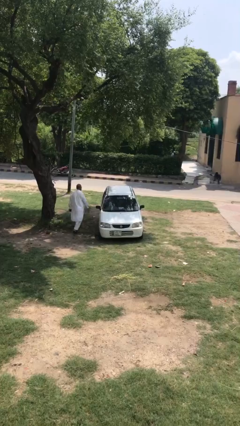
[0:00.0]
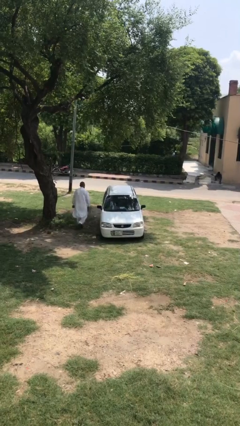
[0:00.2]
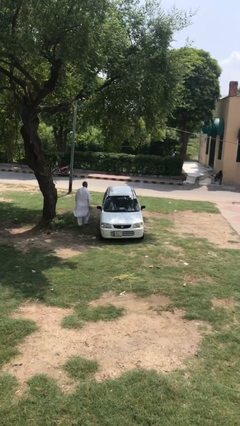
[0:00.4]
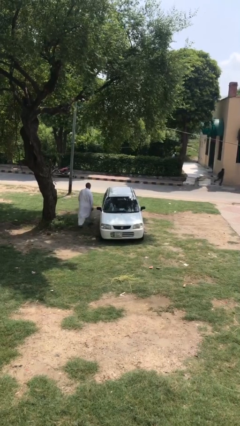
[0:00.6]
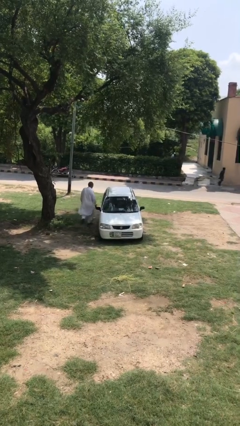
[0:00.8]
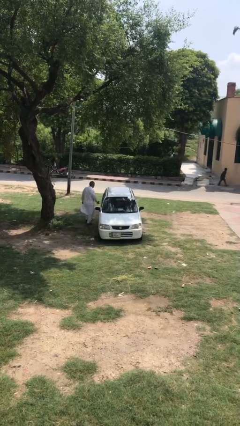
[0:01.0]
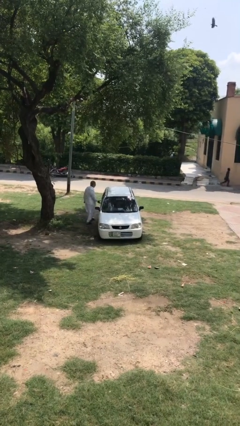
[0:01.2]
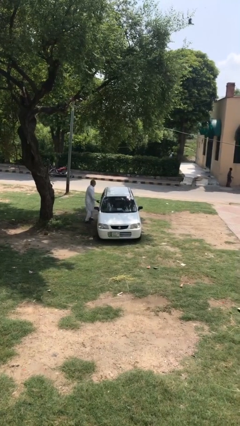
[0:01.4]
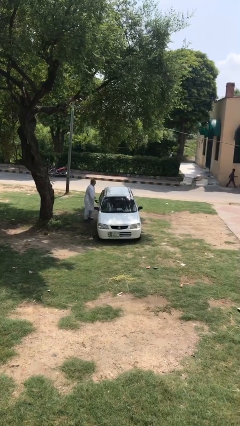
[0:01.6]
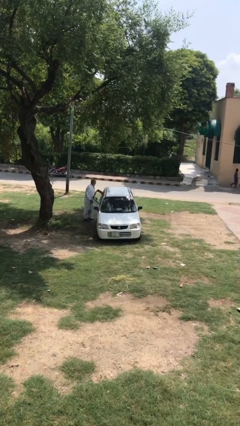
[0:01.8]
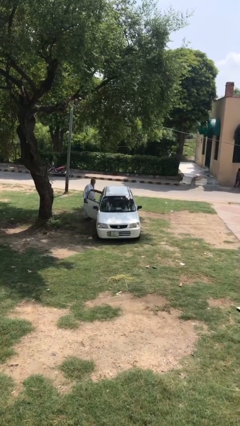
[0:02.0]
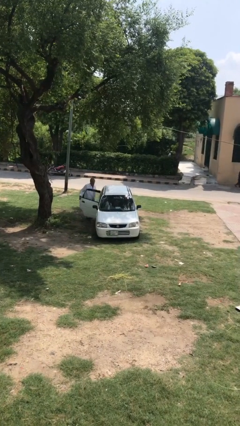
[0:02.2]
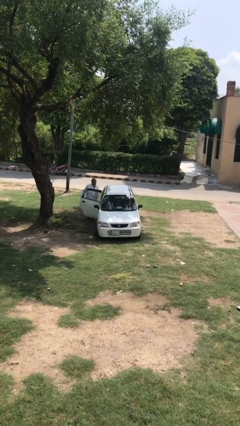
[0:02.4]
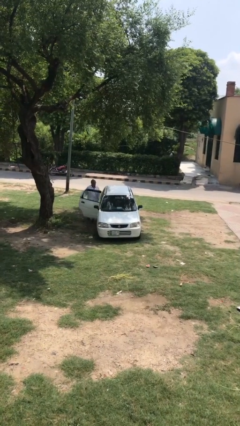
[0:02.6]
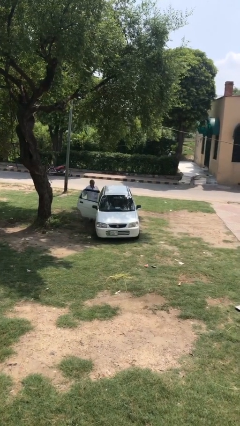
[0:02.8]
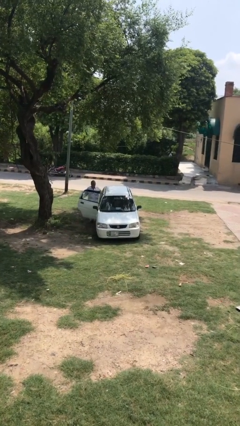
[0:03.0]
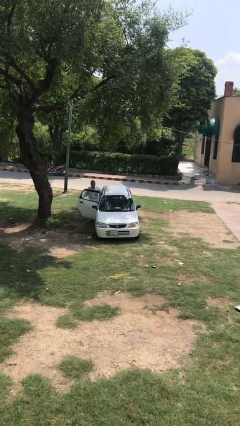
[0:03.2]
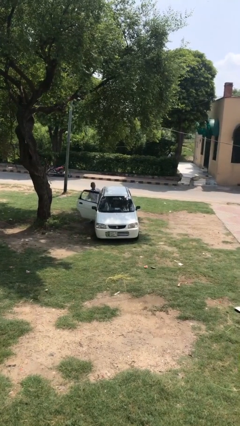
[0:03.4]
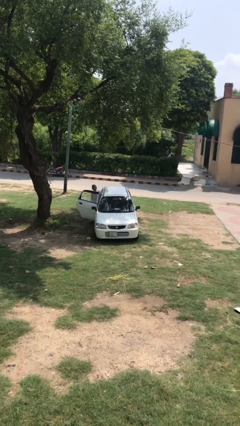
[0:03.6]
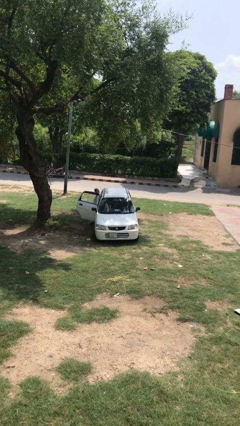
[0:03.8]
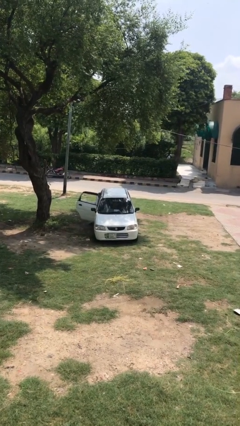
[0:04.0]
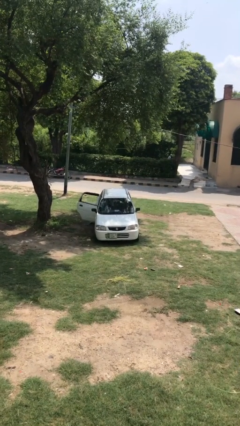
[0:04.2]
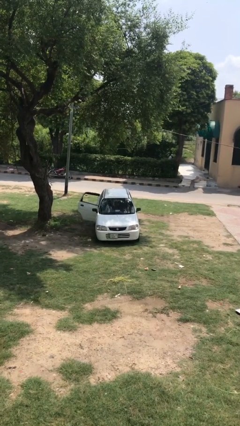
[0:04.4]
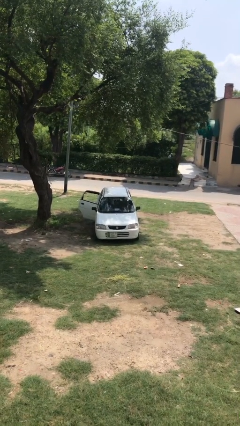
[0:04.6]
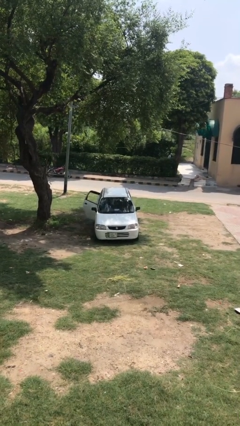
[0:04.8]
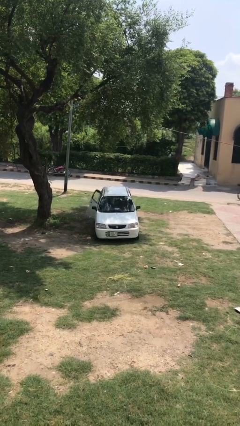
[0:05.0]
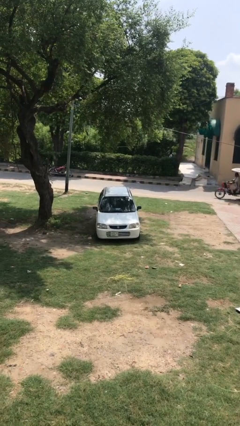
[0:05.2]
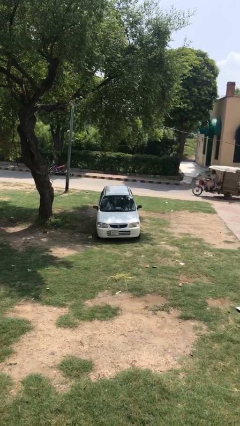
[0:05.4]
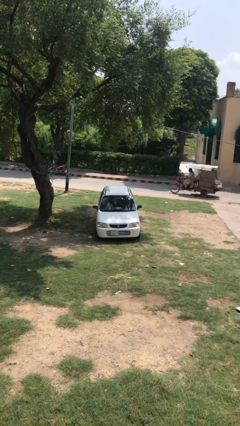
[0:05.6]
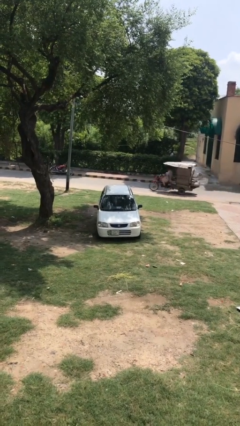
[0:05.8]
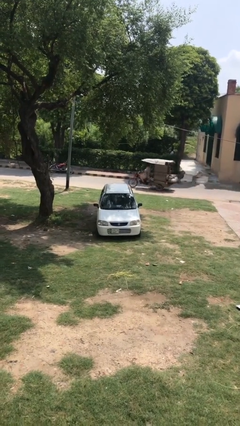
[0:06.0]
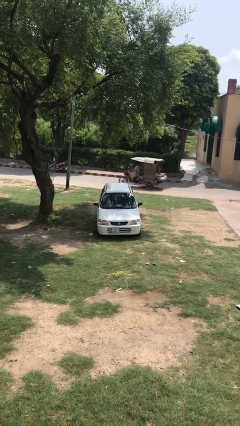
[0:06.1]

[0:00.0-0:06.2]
car picks up person

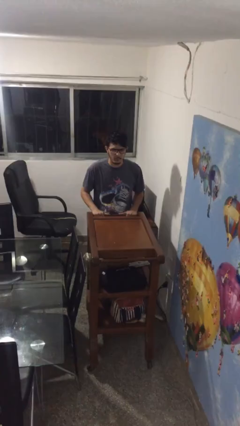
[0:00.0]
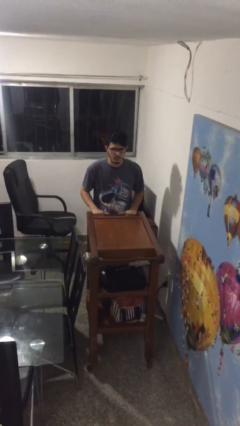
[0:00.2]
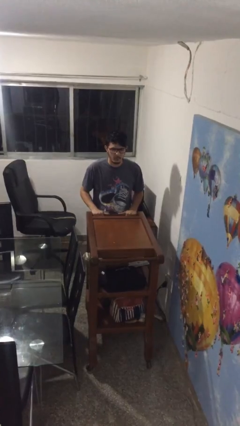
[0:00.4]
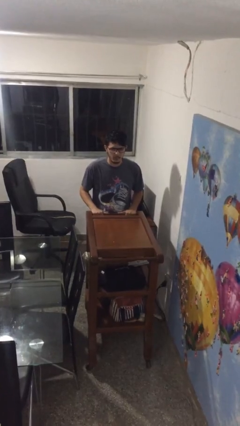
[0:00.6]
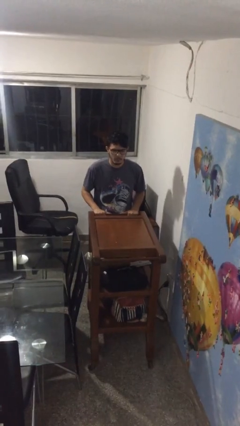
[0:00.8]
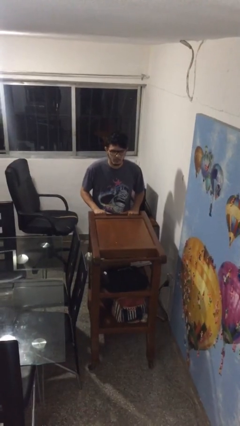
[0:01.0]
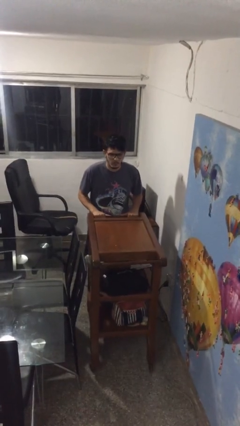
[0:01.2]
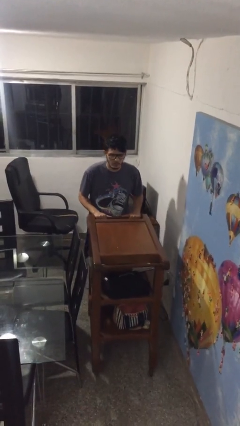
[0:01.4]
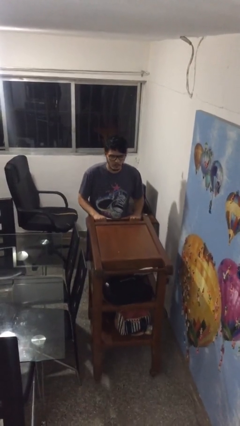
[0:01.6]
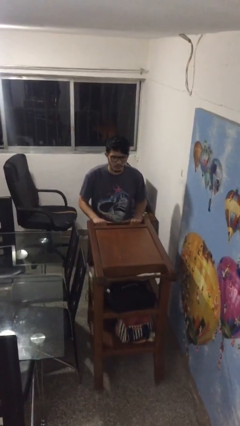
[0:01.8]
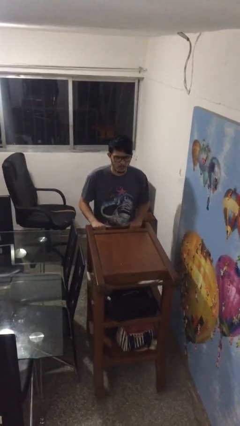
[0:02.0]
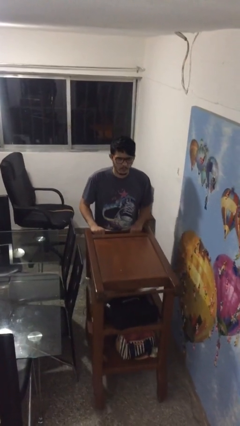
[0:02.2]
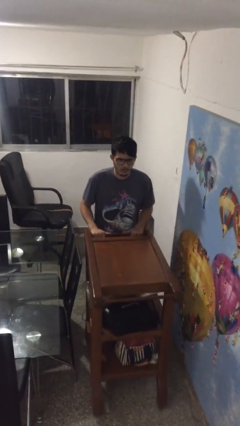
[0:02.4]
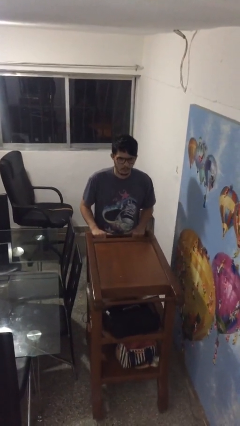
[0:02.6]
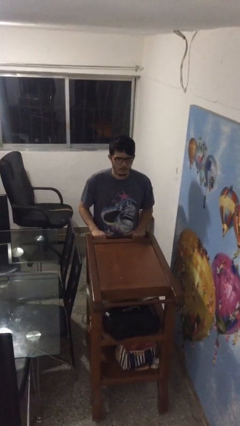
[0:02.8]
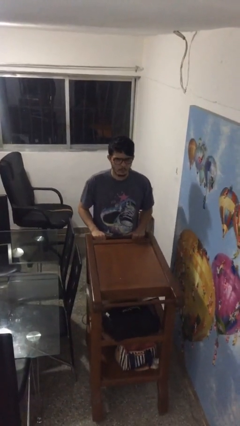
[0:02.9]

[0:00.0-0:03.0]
person pushes wheeled cart

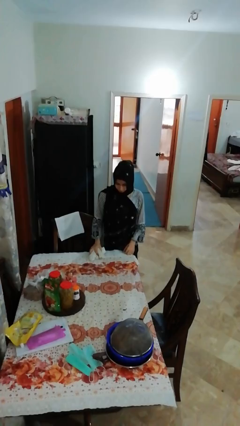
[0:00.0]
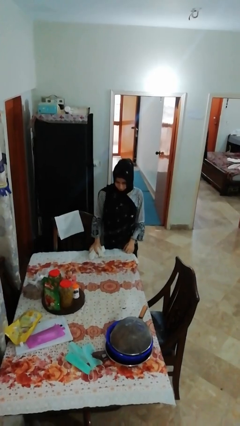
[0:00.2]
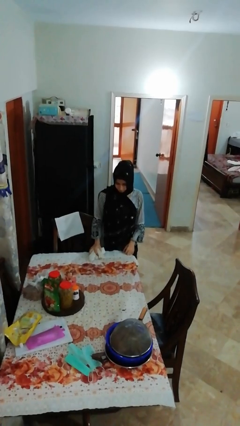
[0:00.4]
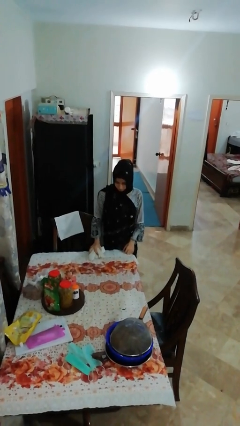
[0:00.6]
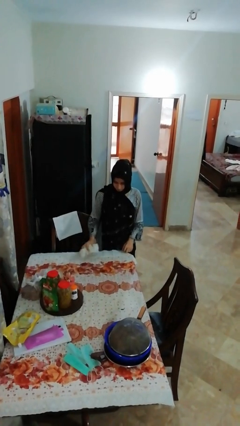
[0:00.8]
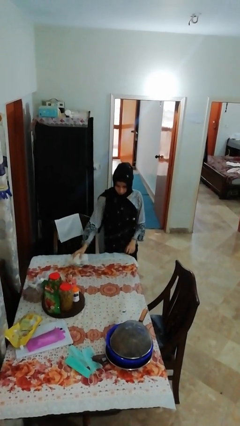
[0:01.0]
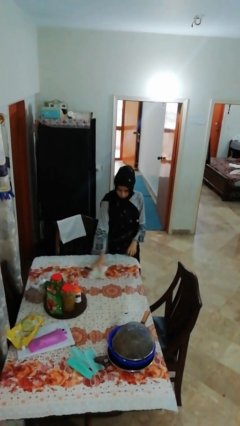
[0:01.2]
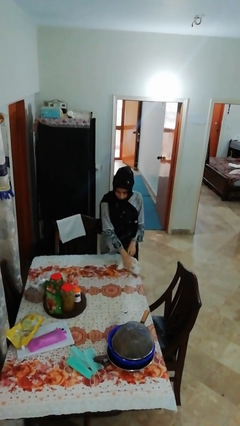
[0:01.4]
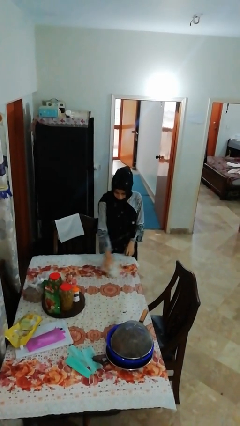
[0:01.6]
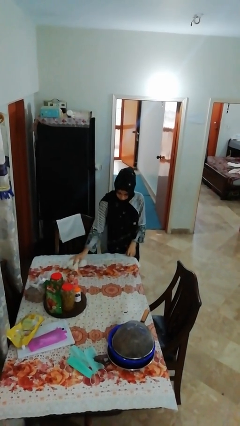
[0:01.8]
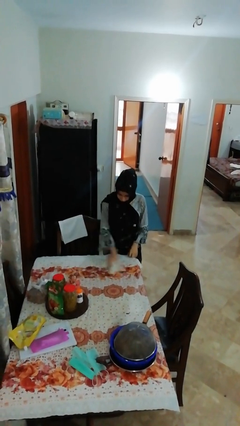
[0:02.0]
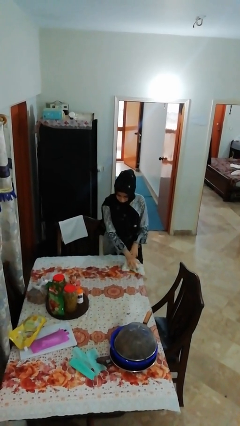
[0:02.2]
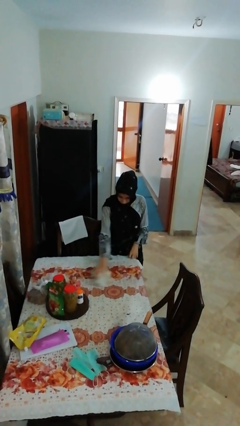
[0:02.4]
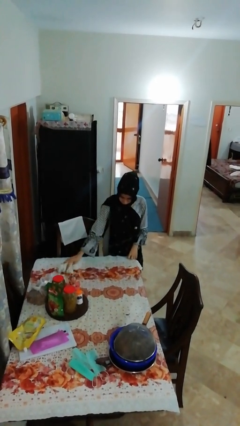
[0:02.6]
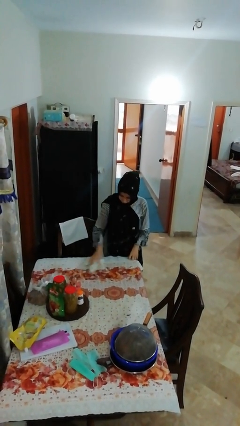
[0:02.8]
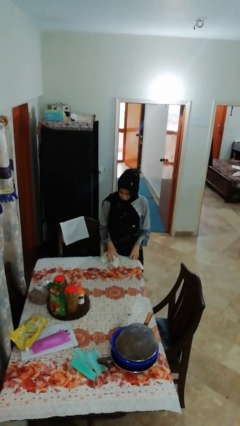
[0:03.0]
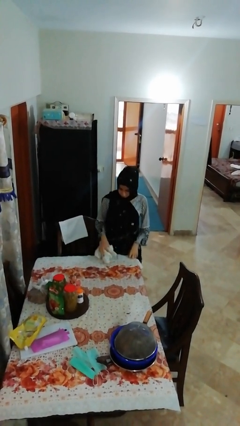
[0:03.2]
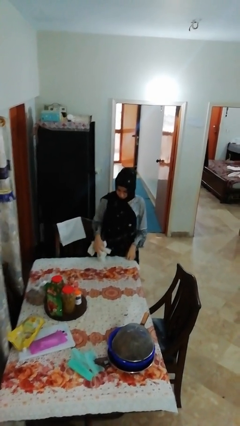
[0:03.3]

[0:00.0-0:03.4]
person cleans table with rag

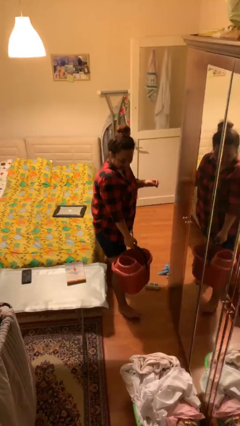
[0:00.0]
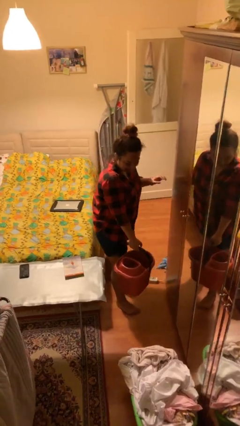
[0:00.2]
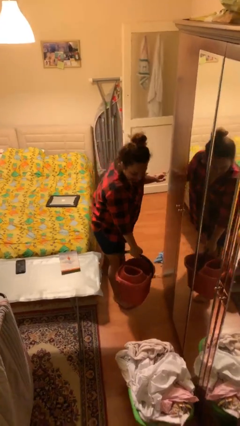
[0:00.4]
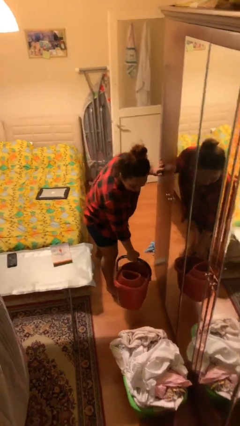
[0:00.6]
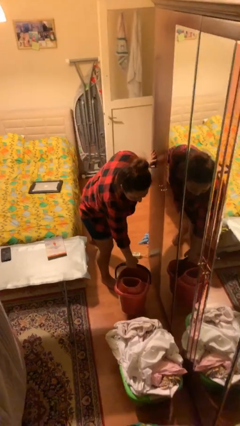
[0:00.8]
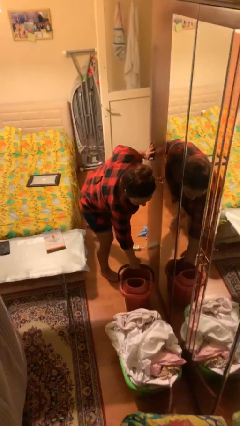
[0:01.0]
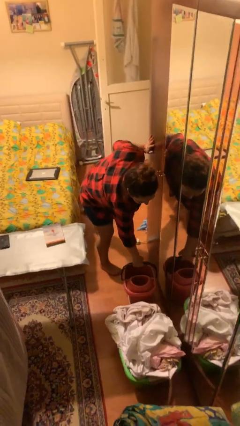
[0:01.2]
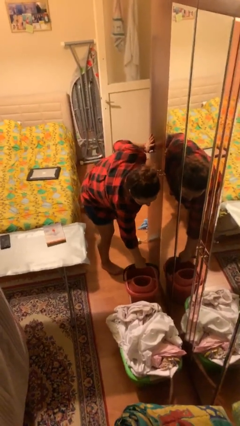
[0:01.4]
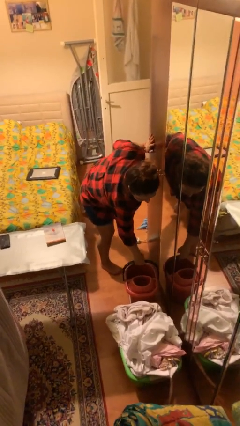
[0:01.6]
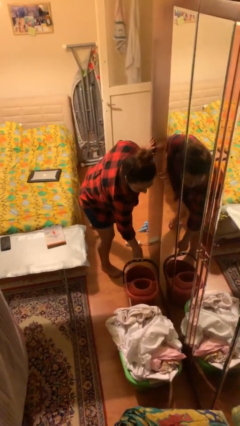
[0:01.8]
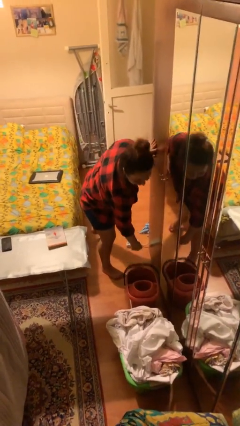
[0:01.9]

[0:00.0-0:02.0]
person puts down object on floor

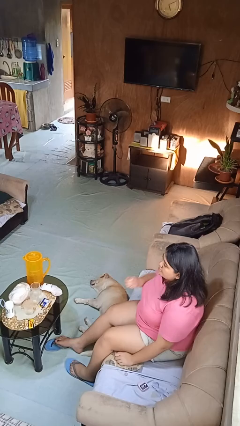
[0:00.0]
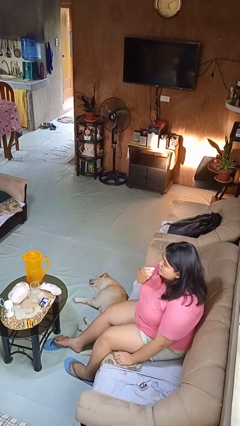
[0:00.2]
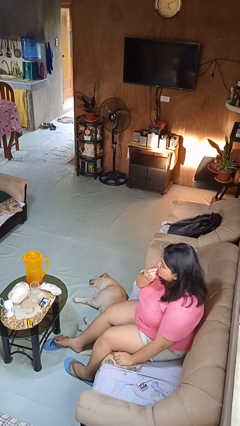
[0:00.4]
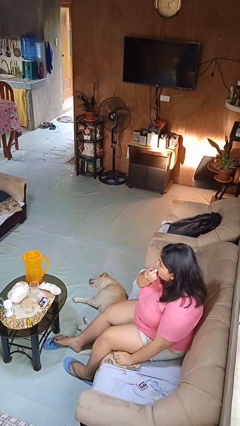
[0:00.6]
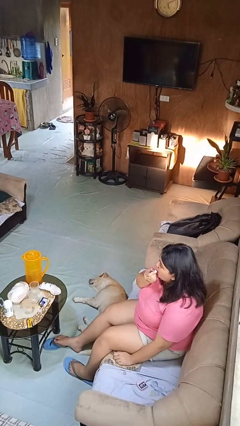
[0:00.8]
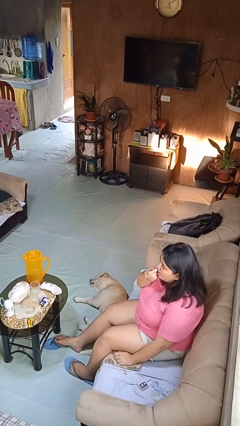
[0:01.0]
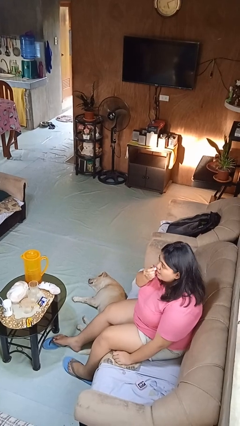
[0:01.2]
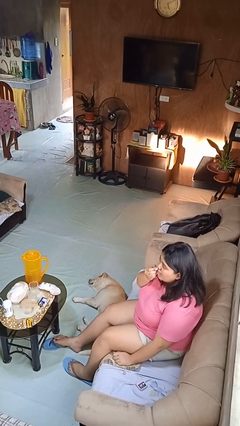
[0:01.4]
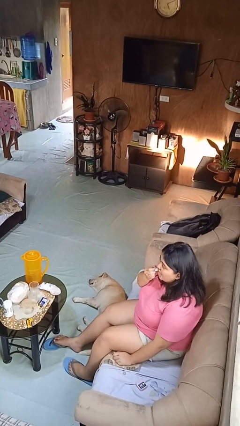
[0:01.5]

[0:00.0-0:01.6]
person applies lip makeup

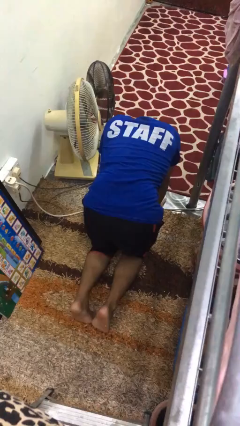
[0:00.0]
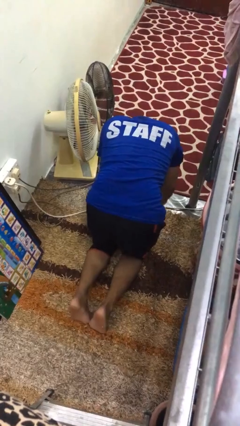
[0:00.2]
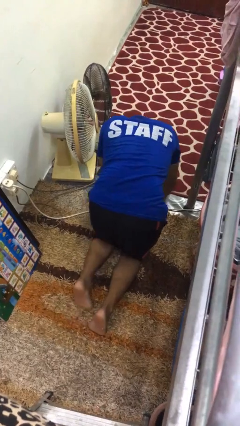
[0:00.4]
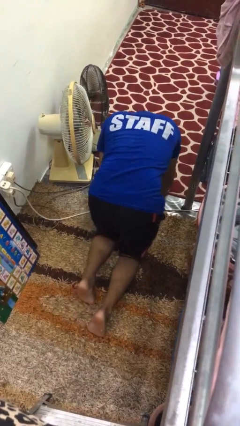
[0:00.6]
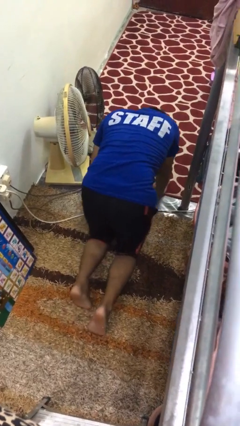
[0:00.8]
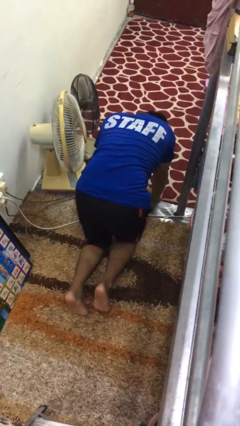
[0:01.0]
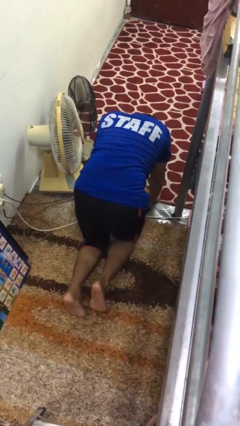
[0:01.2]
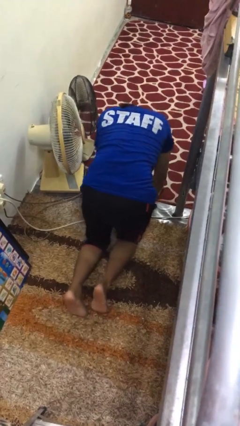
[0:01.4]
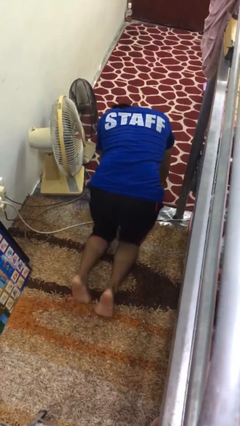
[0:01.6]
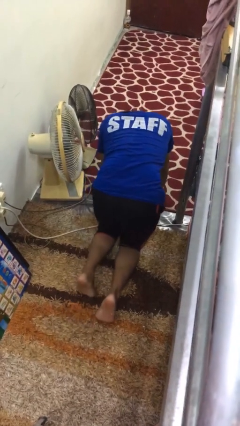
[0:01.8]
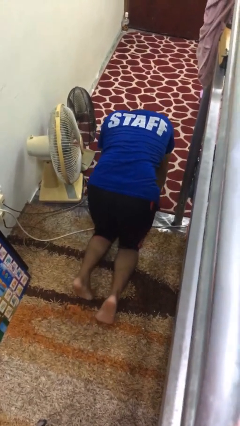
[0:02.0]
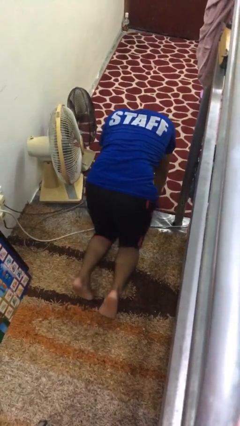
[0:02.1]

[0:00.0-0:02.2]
person crawls
